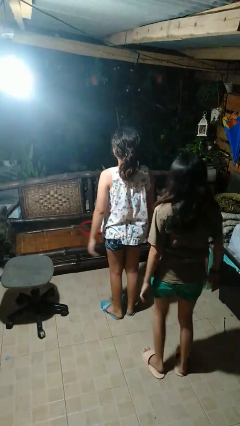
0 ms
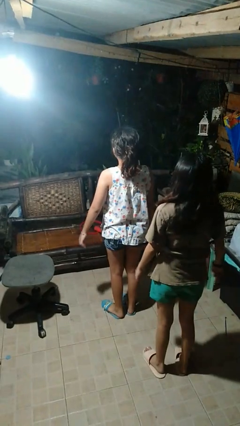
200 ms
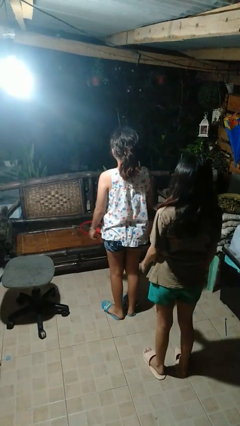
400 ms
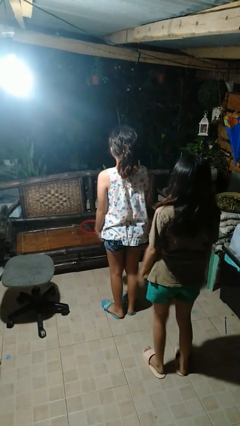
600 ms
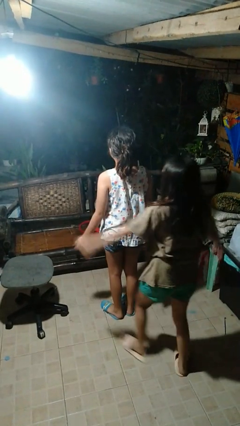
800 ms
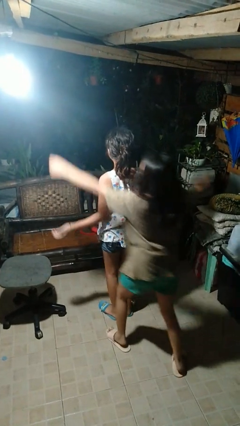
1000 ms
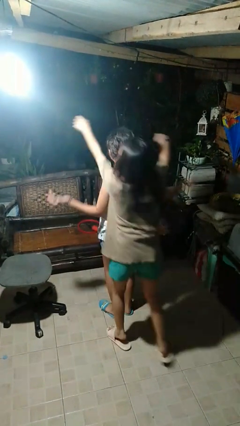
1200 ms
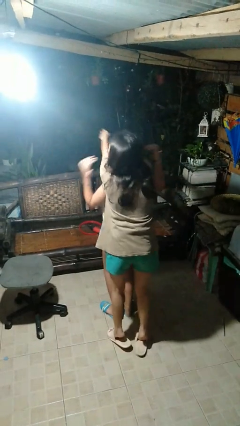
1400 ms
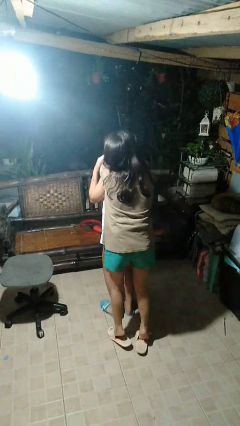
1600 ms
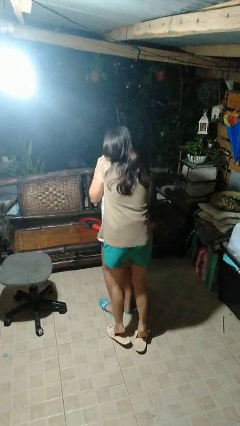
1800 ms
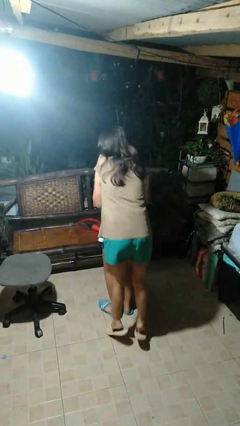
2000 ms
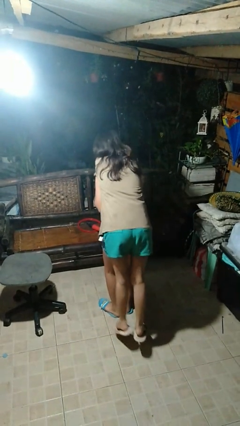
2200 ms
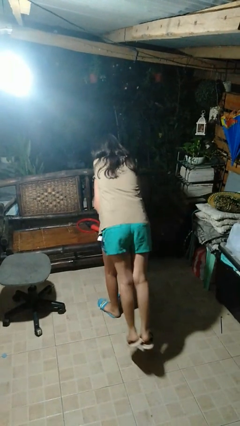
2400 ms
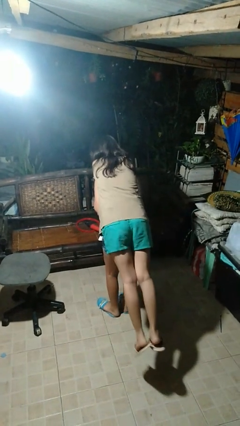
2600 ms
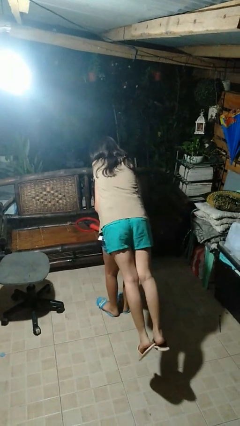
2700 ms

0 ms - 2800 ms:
person carries person on back

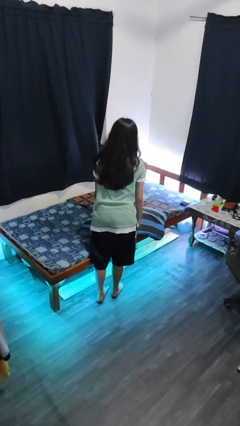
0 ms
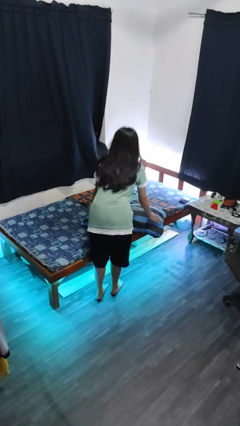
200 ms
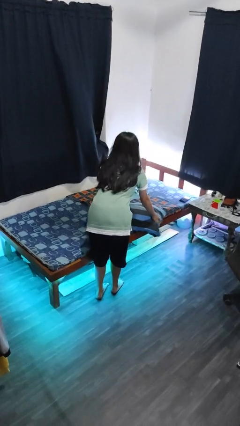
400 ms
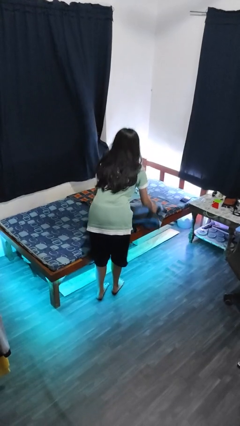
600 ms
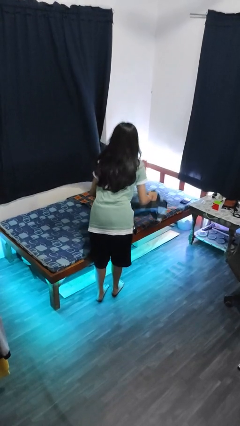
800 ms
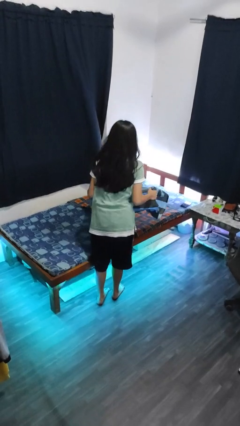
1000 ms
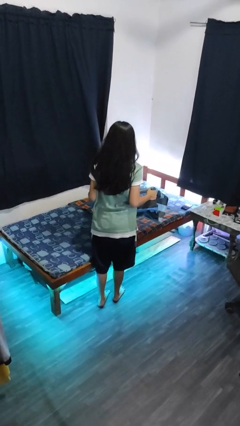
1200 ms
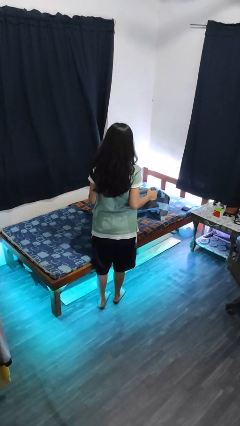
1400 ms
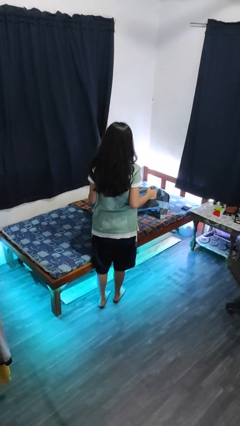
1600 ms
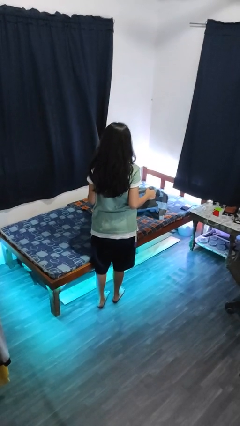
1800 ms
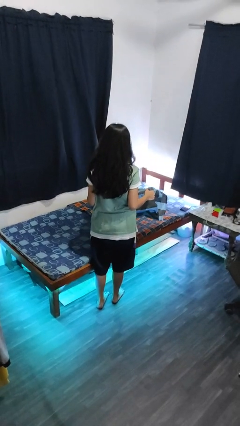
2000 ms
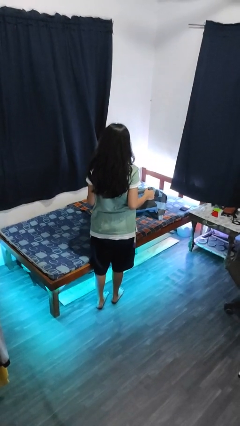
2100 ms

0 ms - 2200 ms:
person picks up object from bed

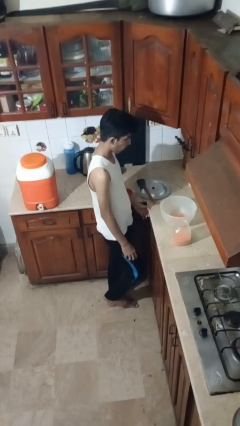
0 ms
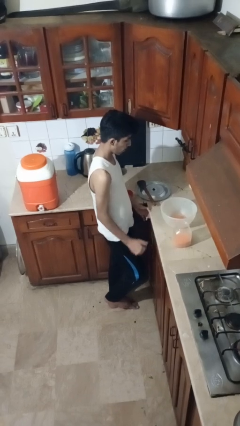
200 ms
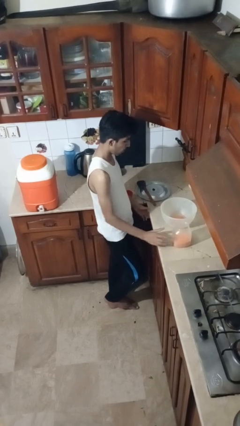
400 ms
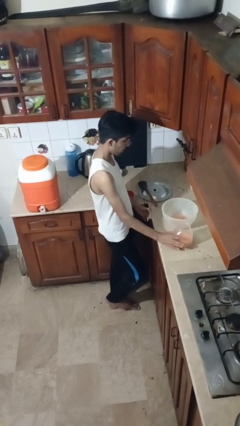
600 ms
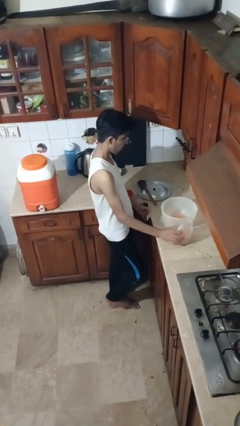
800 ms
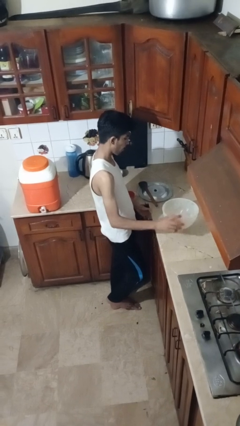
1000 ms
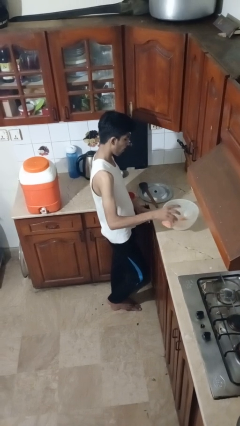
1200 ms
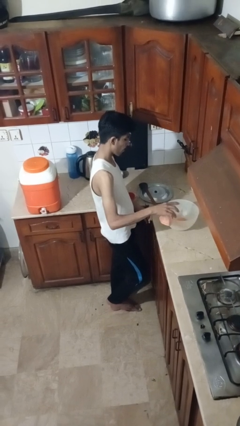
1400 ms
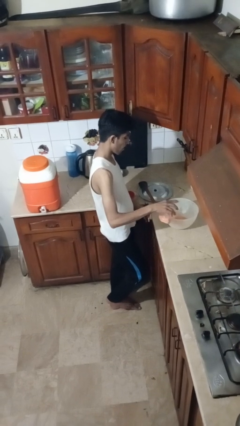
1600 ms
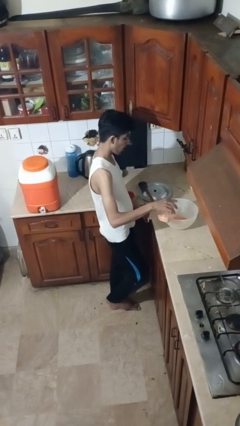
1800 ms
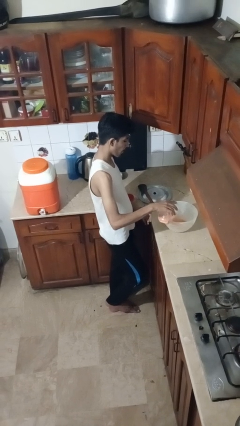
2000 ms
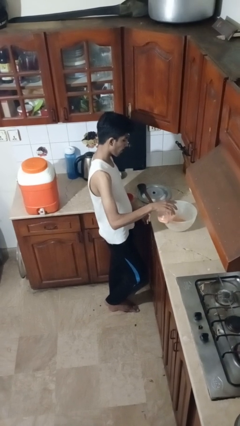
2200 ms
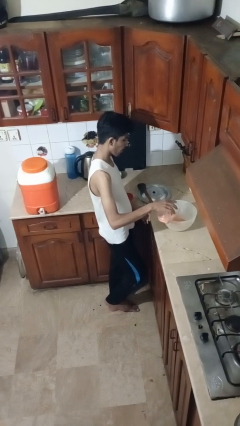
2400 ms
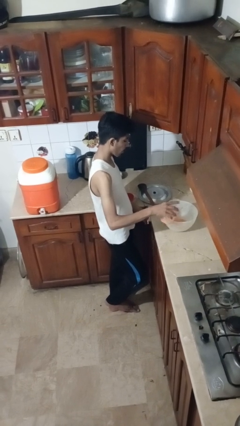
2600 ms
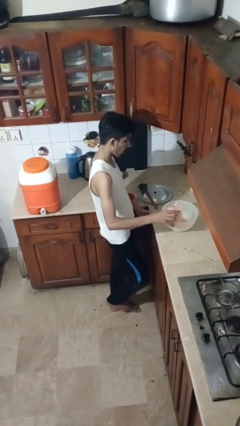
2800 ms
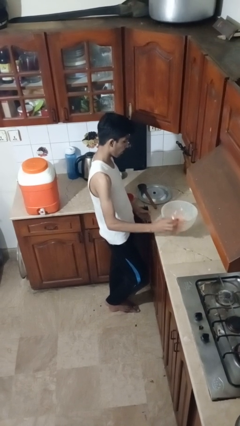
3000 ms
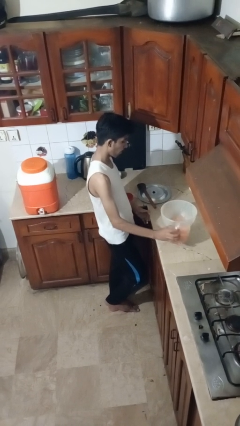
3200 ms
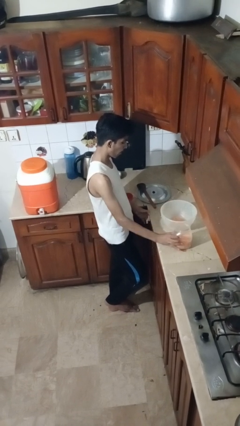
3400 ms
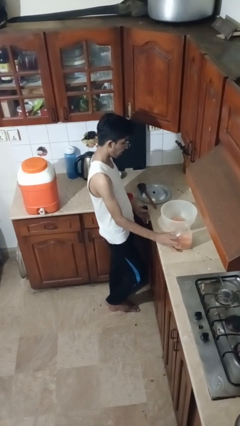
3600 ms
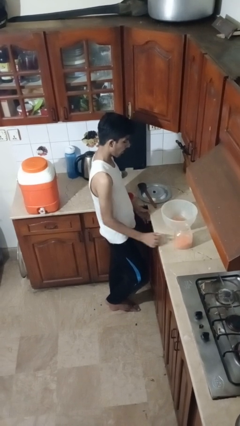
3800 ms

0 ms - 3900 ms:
person pours into bowl

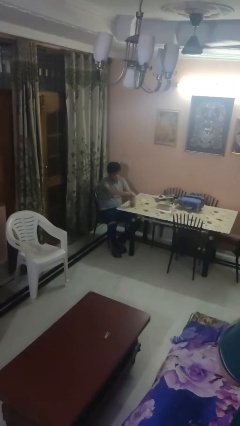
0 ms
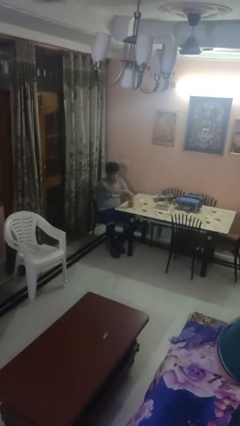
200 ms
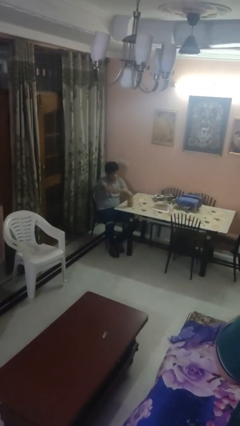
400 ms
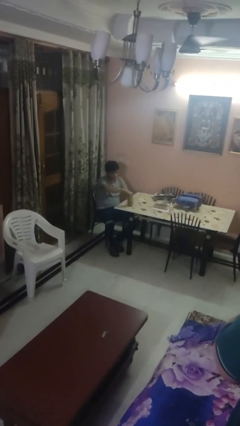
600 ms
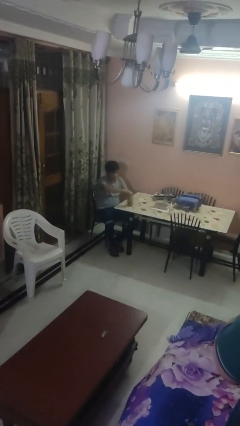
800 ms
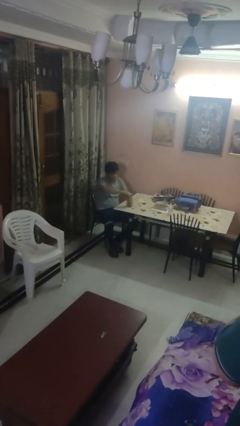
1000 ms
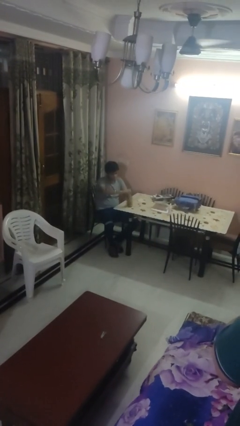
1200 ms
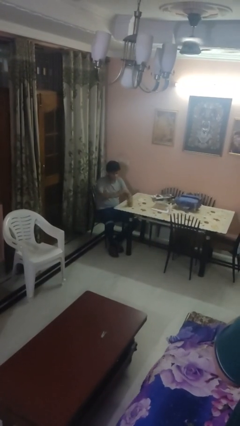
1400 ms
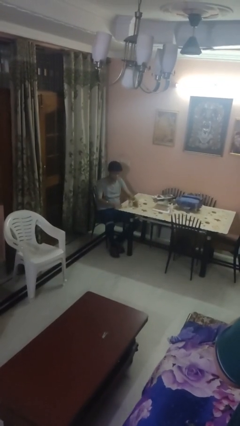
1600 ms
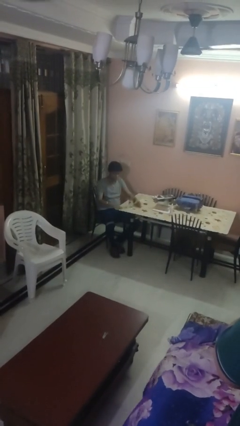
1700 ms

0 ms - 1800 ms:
person unscrews lid from bottle

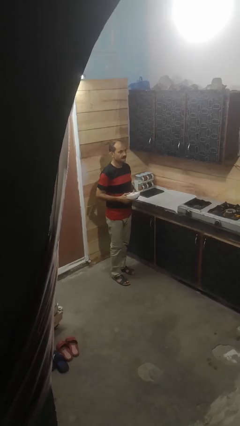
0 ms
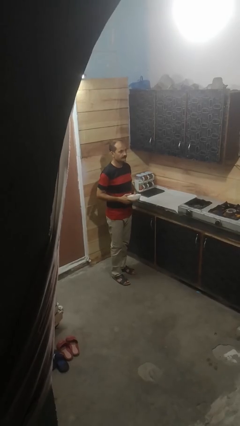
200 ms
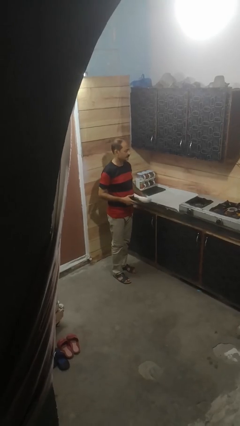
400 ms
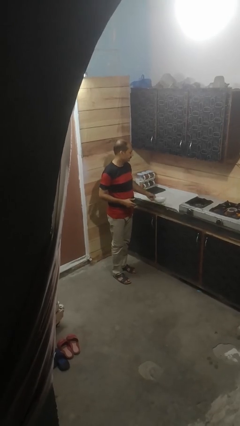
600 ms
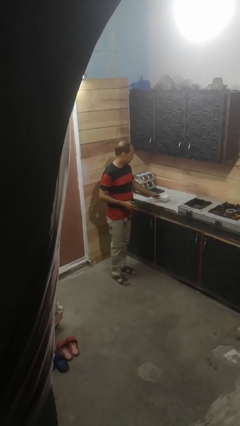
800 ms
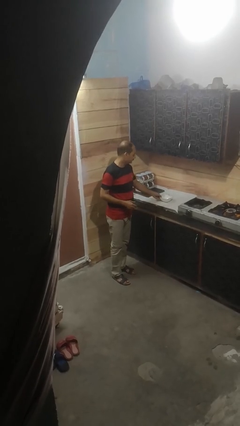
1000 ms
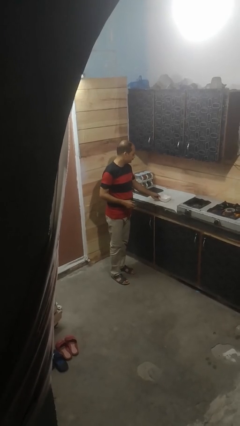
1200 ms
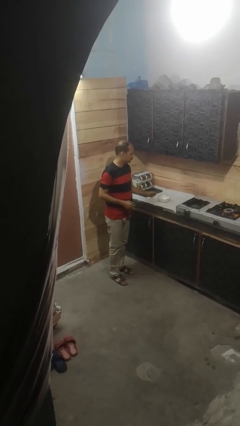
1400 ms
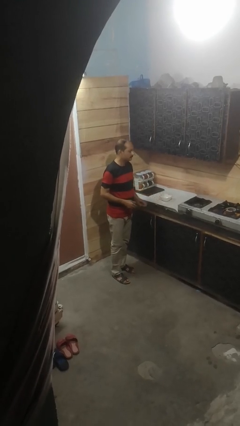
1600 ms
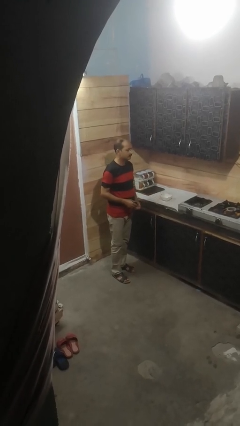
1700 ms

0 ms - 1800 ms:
person puts down object on countertop

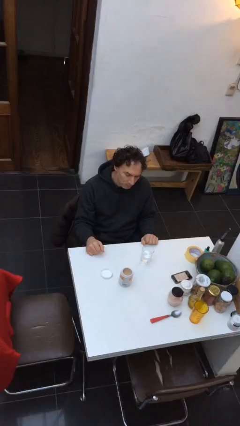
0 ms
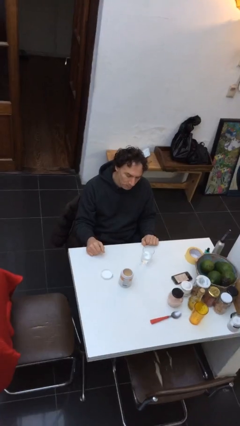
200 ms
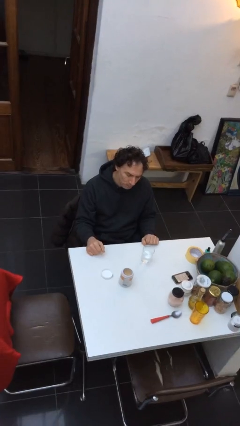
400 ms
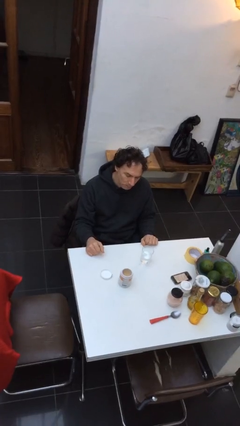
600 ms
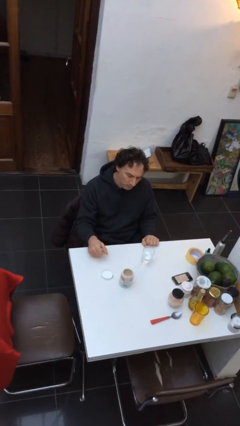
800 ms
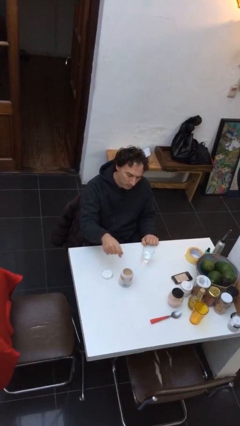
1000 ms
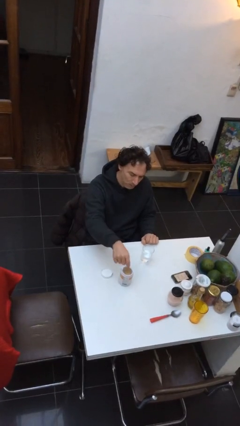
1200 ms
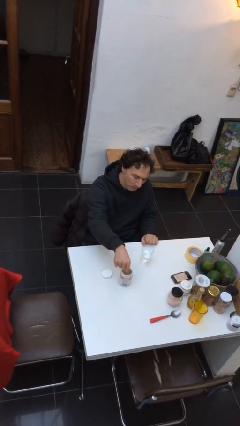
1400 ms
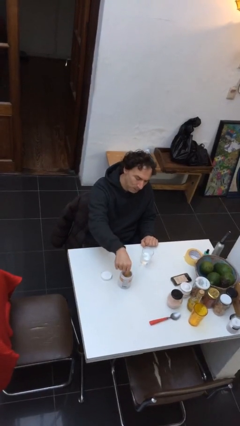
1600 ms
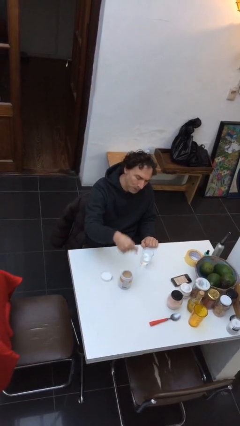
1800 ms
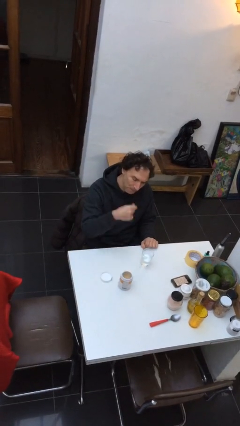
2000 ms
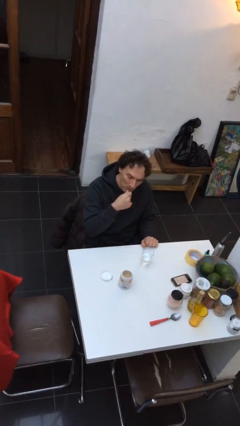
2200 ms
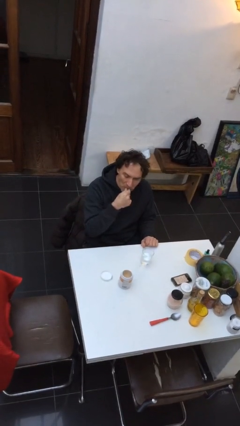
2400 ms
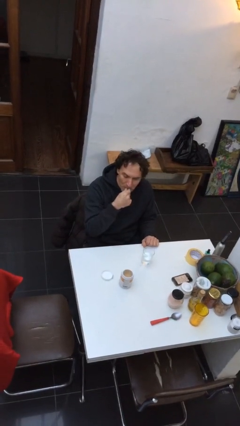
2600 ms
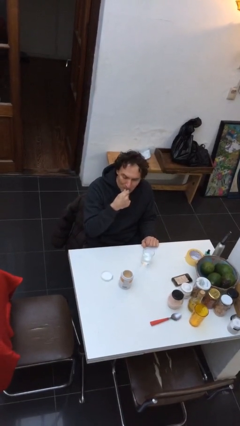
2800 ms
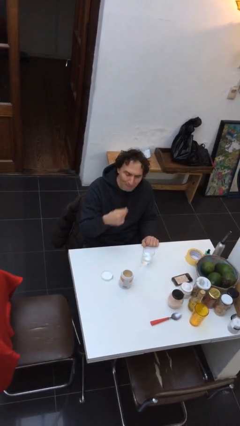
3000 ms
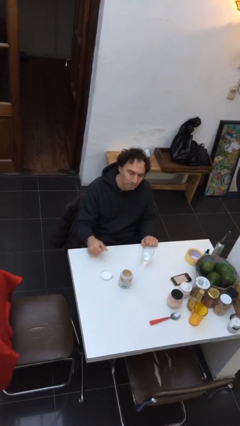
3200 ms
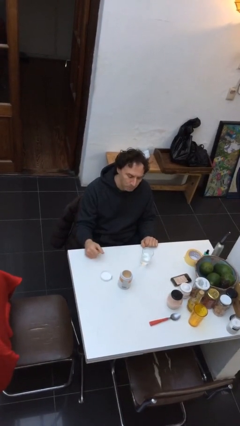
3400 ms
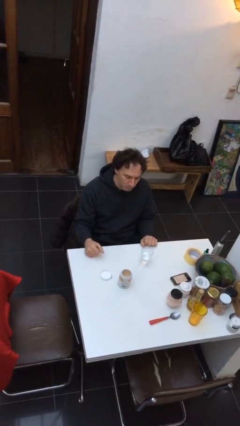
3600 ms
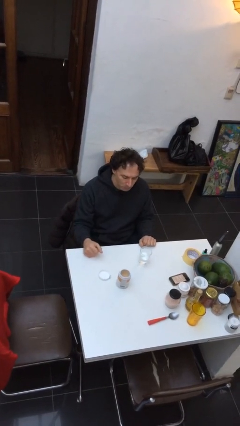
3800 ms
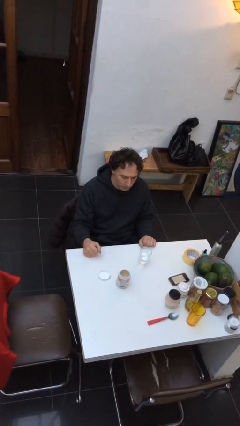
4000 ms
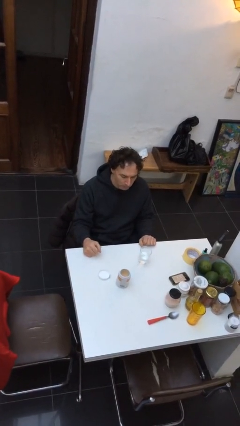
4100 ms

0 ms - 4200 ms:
person takes medicine pills

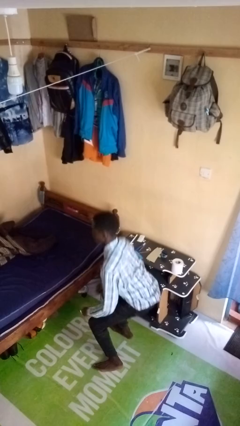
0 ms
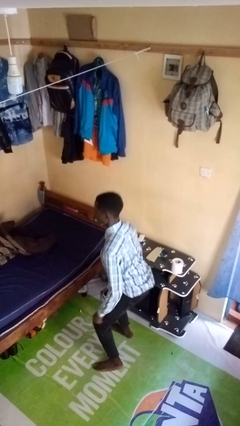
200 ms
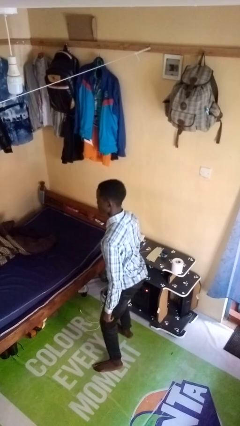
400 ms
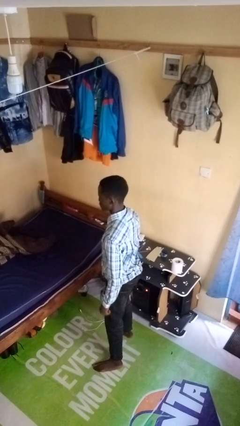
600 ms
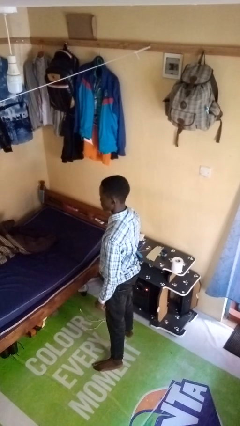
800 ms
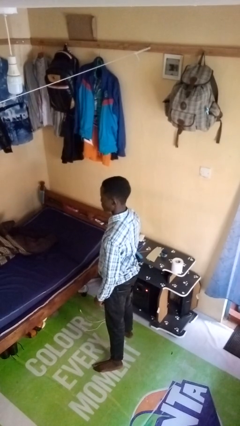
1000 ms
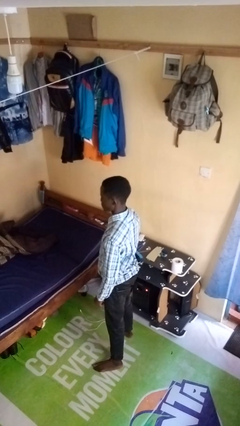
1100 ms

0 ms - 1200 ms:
person stands up
